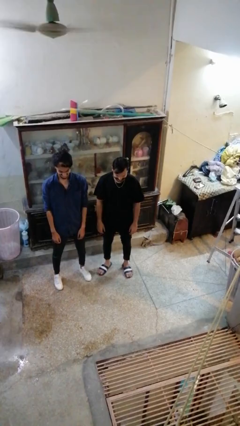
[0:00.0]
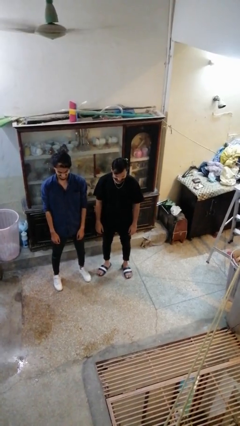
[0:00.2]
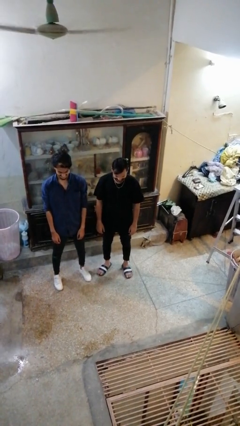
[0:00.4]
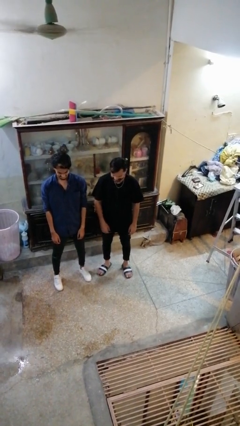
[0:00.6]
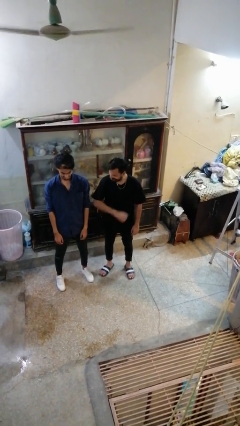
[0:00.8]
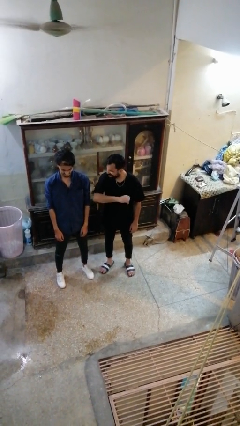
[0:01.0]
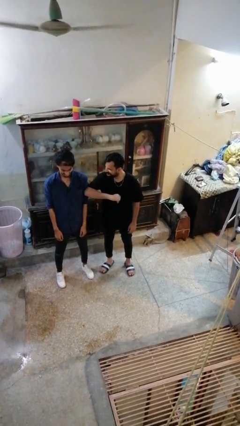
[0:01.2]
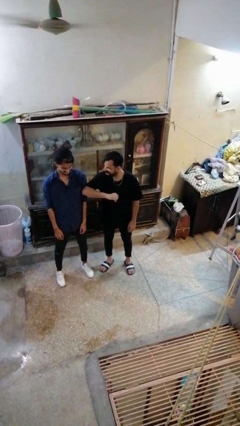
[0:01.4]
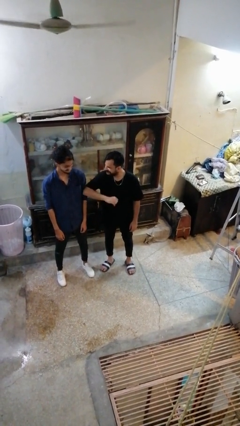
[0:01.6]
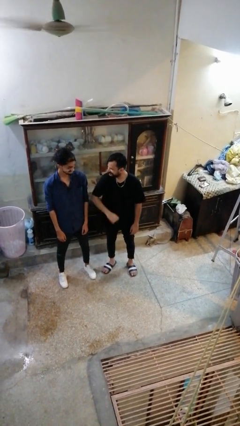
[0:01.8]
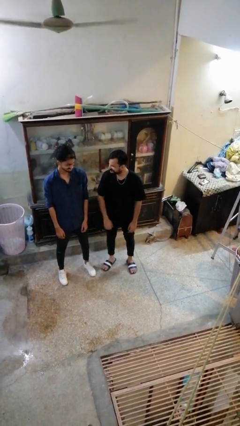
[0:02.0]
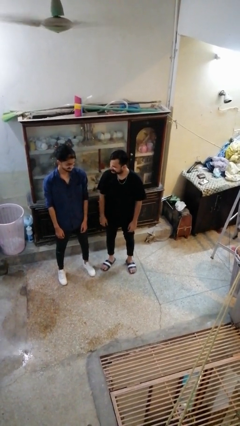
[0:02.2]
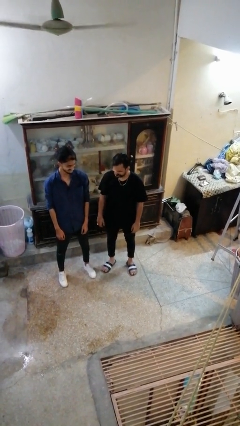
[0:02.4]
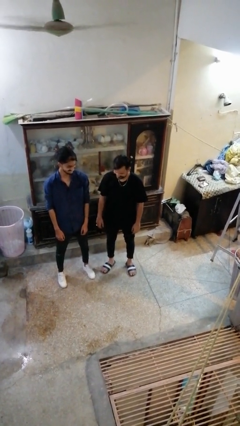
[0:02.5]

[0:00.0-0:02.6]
person nudges person with elbow

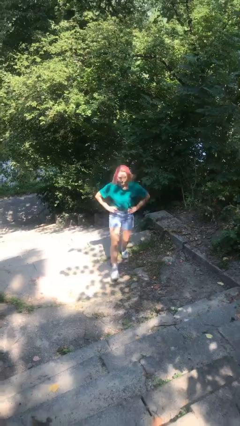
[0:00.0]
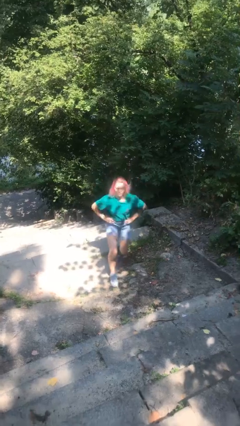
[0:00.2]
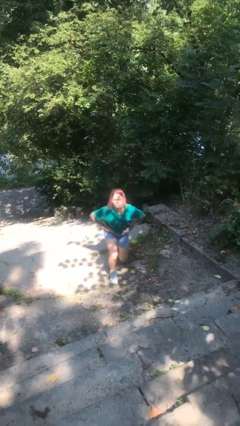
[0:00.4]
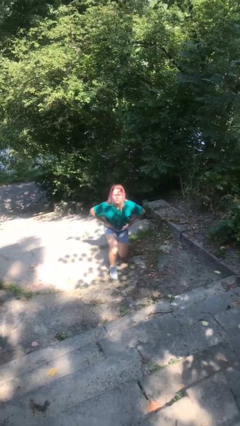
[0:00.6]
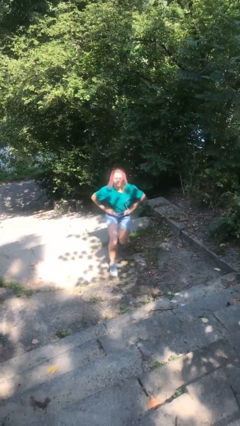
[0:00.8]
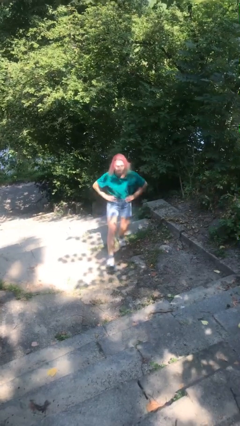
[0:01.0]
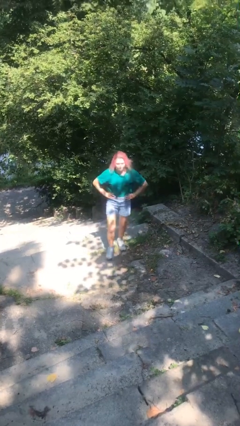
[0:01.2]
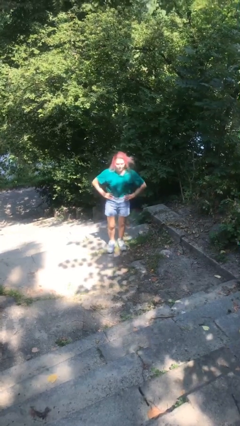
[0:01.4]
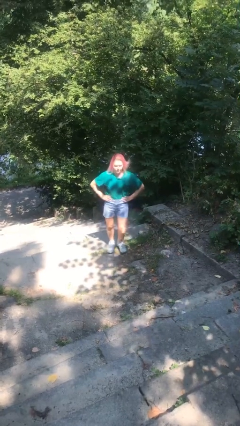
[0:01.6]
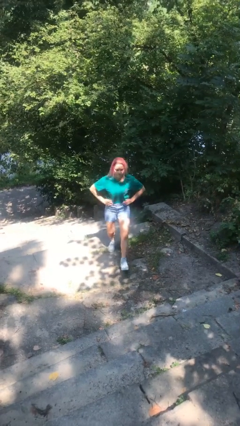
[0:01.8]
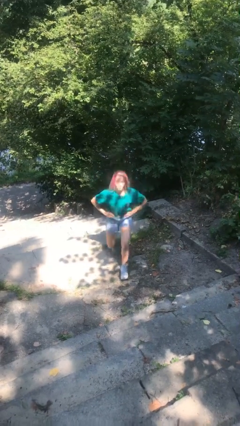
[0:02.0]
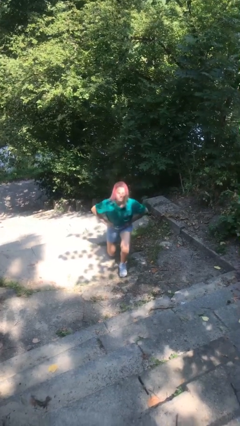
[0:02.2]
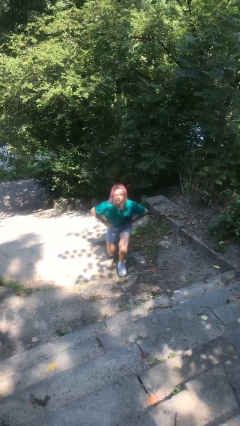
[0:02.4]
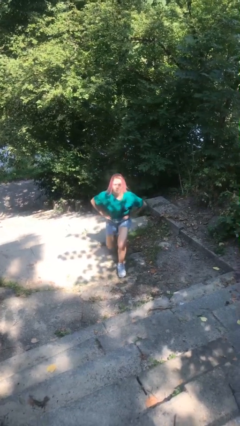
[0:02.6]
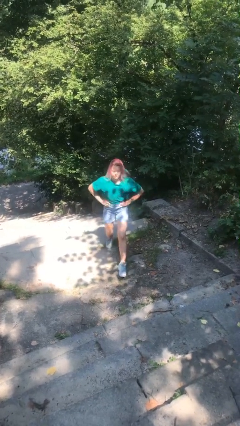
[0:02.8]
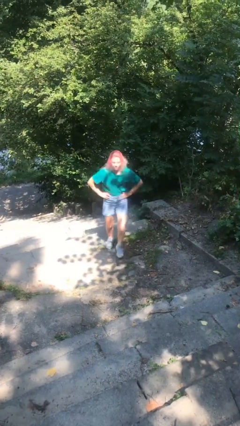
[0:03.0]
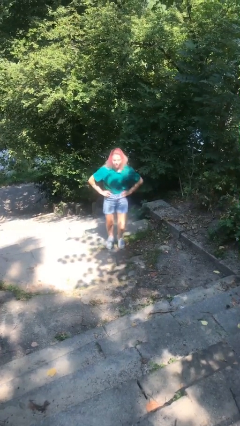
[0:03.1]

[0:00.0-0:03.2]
person exercises with lunges

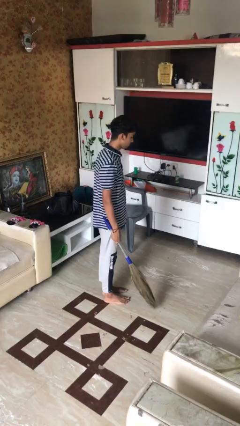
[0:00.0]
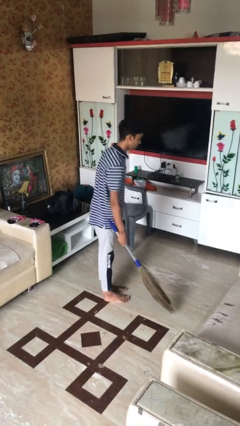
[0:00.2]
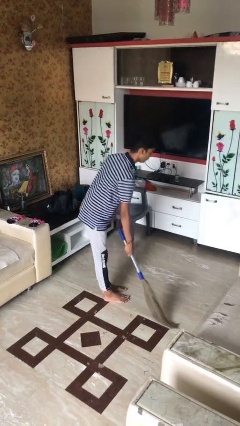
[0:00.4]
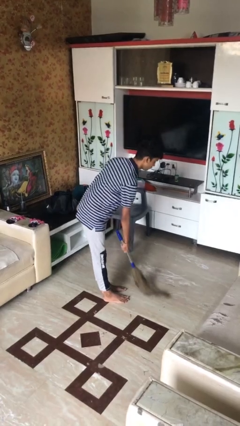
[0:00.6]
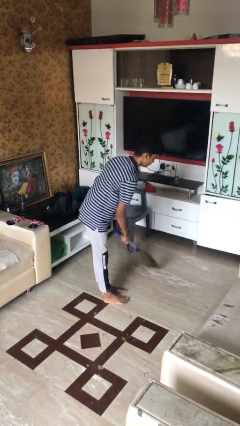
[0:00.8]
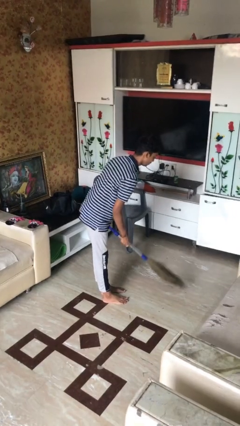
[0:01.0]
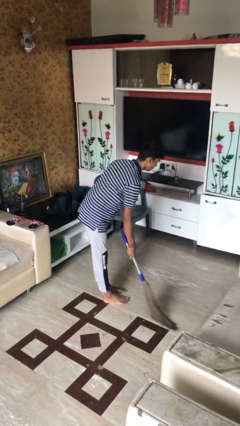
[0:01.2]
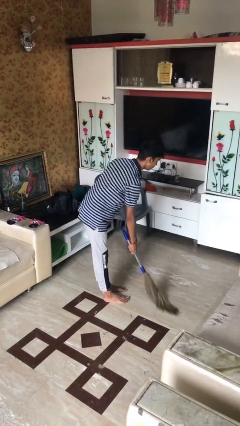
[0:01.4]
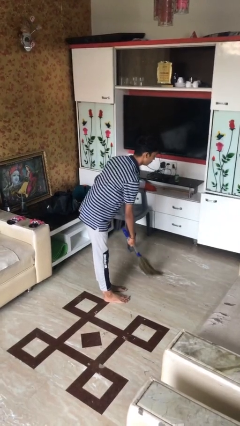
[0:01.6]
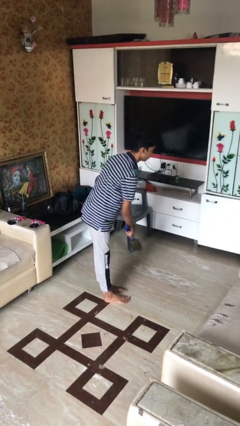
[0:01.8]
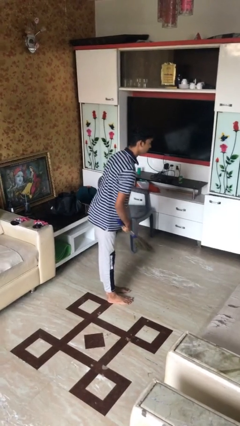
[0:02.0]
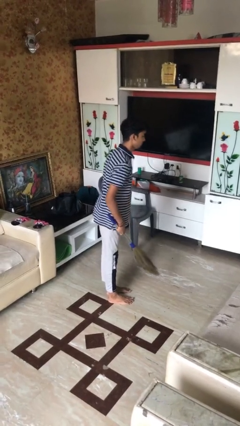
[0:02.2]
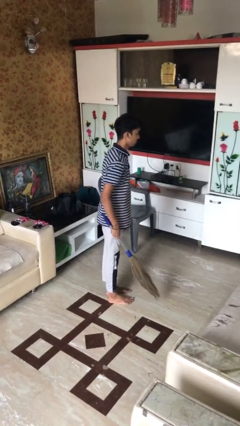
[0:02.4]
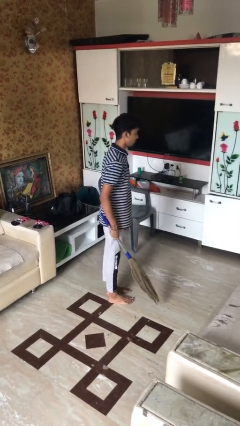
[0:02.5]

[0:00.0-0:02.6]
person sweeps floor

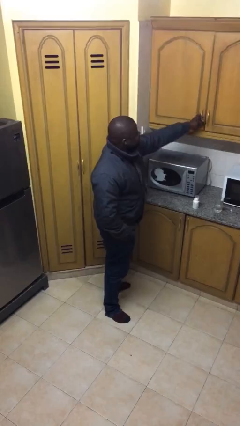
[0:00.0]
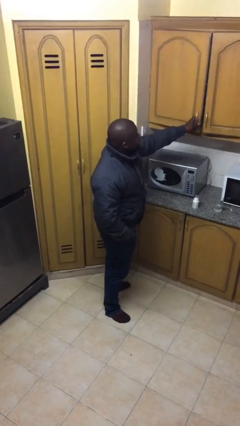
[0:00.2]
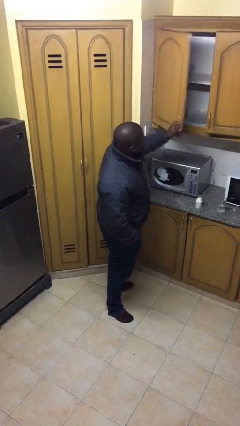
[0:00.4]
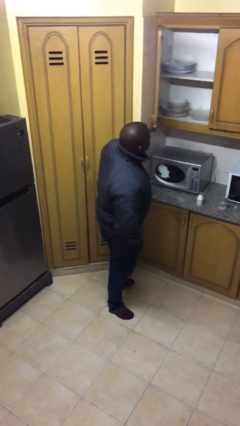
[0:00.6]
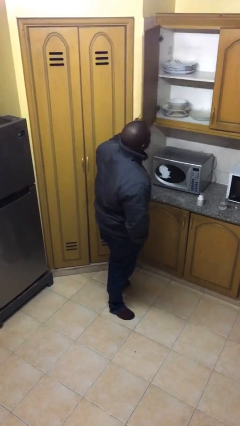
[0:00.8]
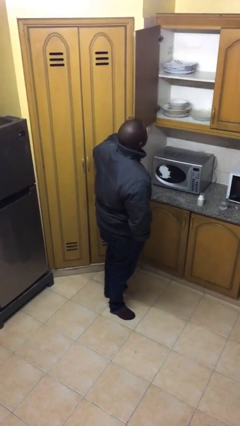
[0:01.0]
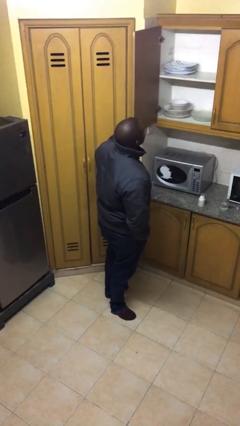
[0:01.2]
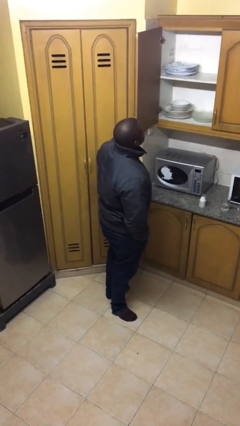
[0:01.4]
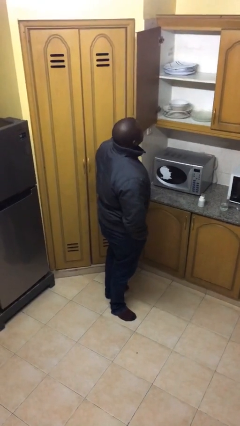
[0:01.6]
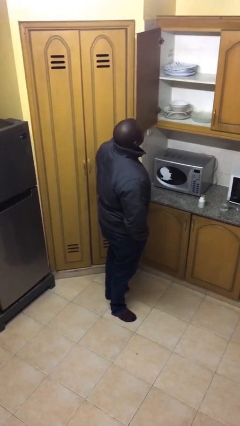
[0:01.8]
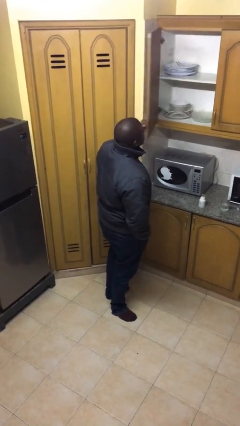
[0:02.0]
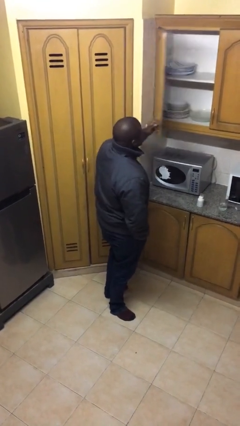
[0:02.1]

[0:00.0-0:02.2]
person closes cabinet

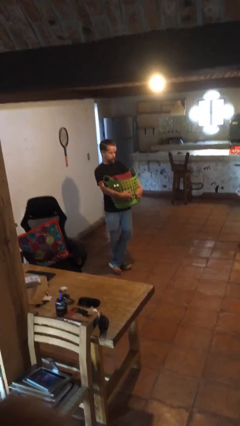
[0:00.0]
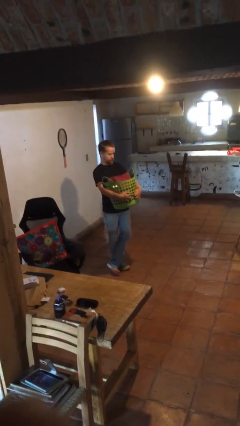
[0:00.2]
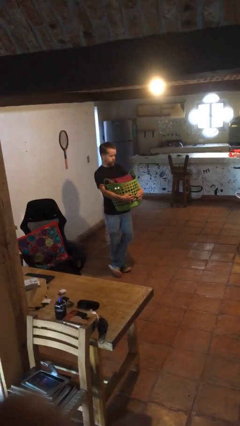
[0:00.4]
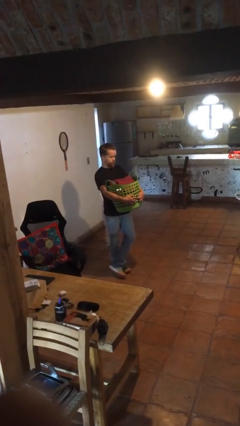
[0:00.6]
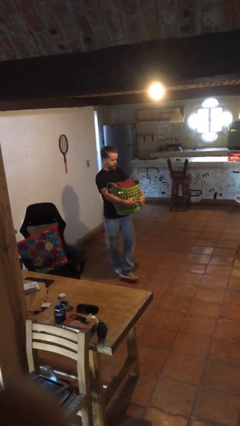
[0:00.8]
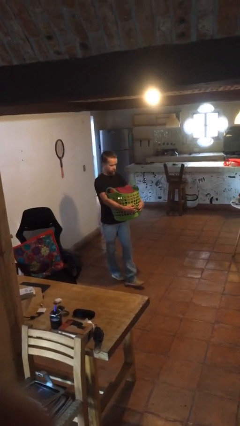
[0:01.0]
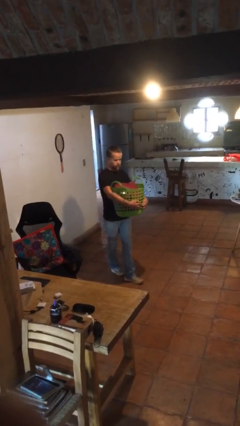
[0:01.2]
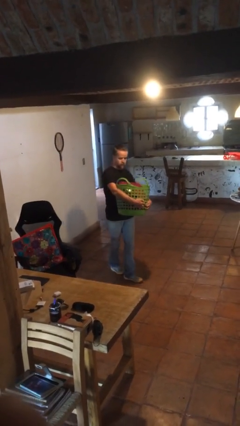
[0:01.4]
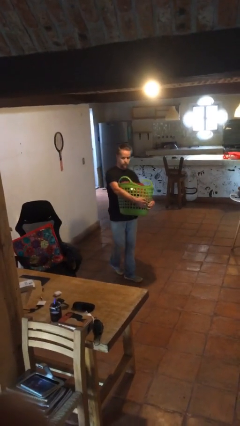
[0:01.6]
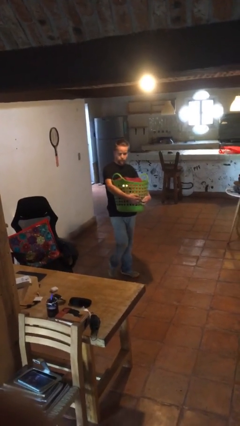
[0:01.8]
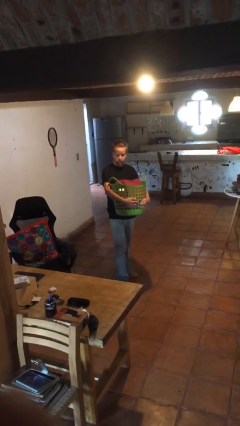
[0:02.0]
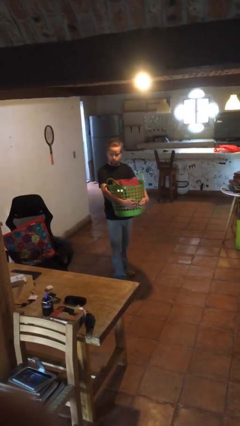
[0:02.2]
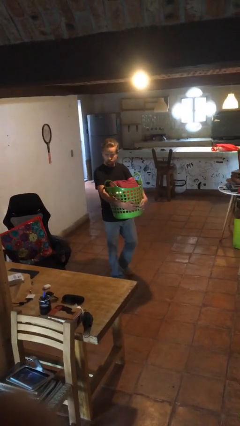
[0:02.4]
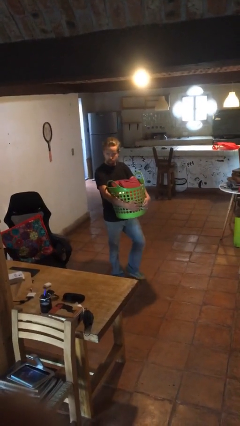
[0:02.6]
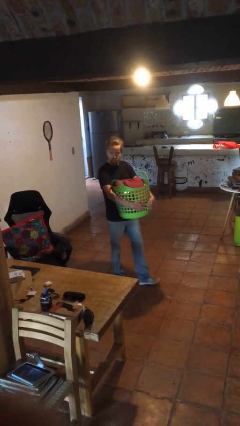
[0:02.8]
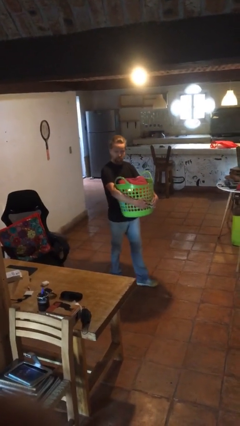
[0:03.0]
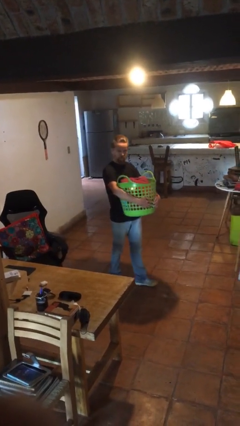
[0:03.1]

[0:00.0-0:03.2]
person carries laundry basket

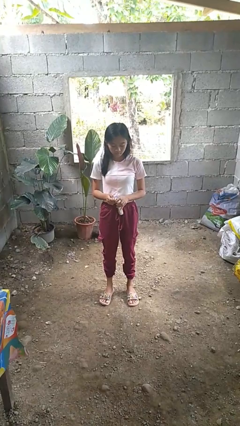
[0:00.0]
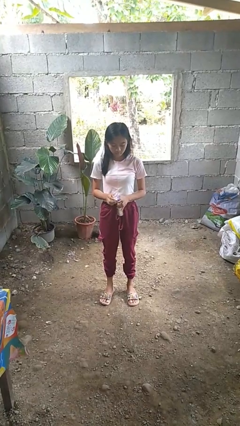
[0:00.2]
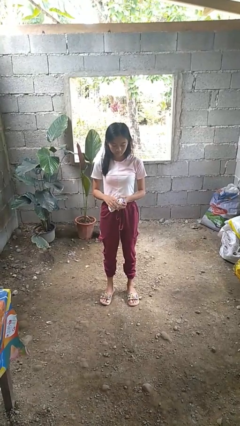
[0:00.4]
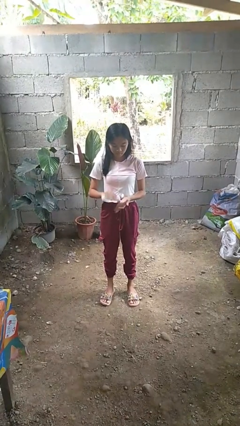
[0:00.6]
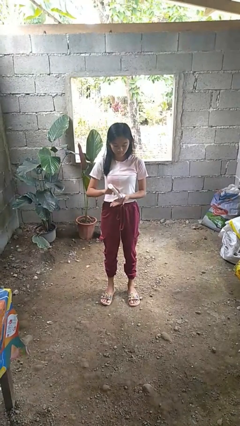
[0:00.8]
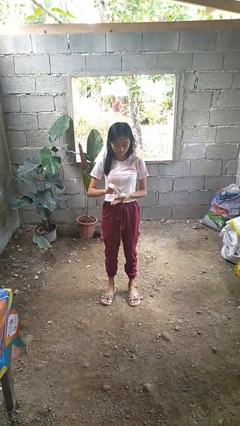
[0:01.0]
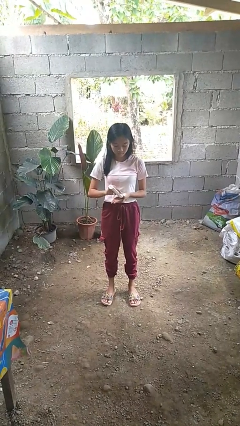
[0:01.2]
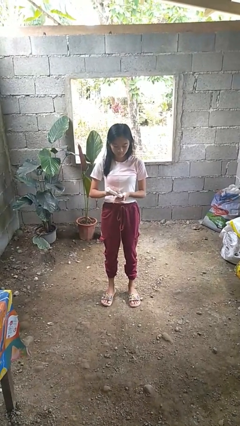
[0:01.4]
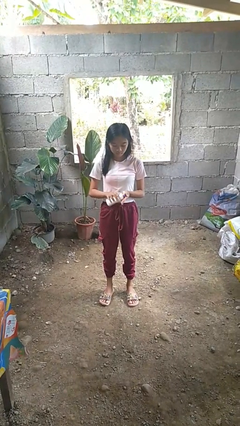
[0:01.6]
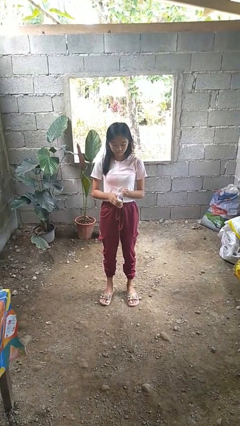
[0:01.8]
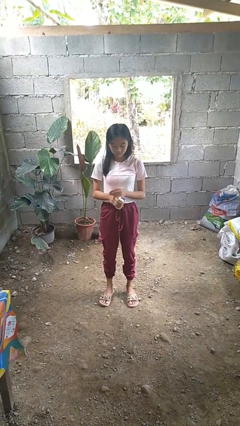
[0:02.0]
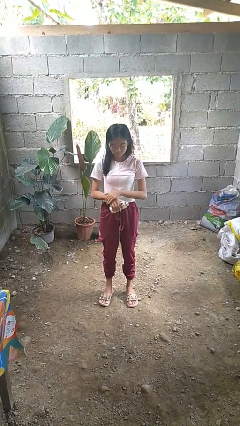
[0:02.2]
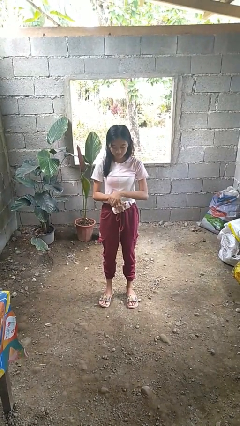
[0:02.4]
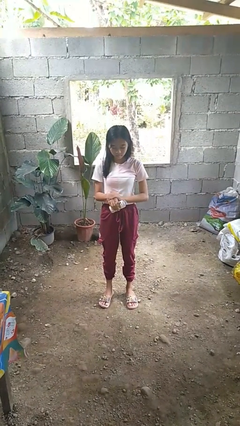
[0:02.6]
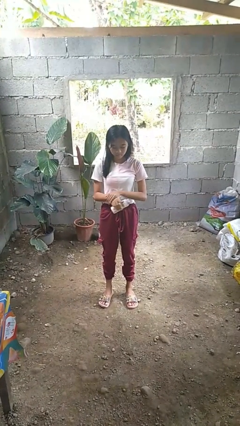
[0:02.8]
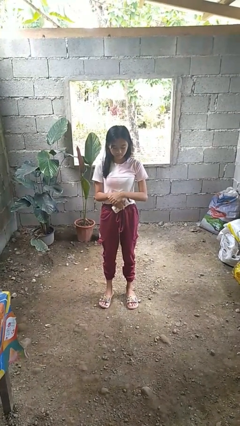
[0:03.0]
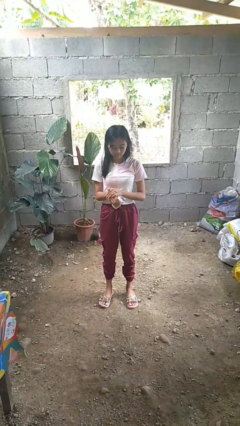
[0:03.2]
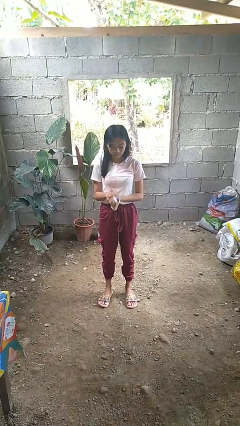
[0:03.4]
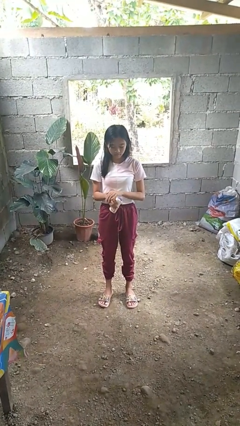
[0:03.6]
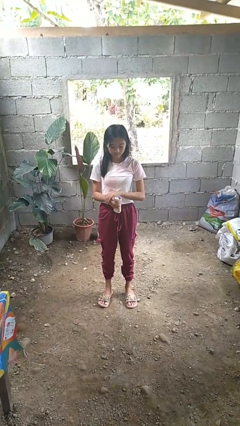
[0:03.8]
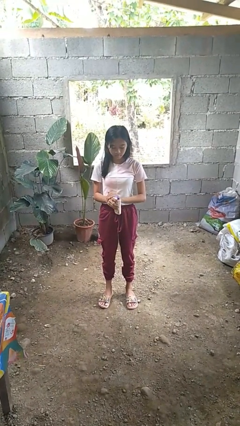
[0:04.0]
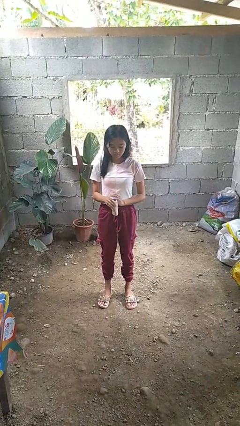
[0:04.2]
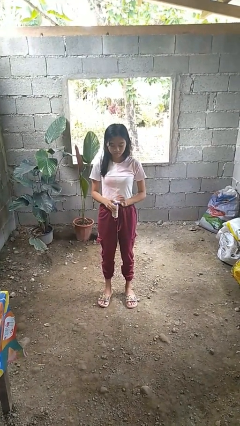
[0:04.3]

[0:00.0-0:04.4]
person applies sunscreen
